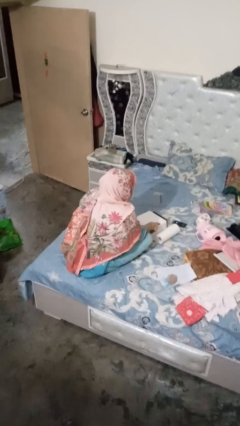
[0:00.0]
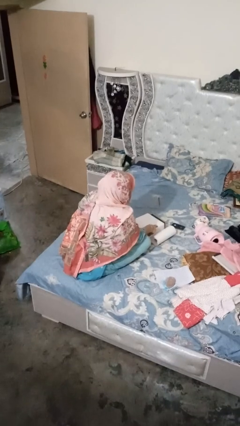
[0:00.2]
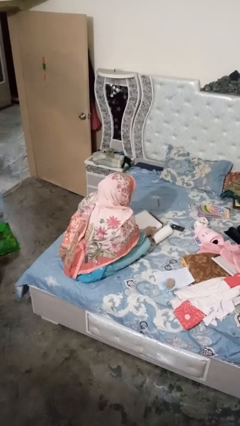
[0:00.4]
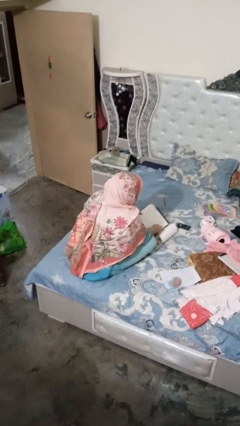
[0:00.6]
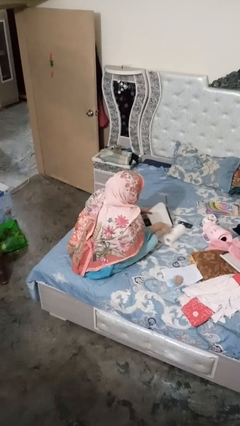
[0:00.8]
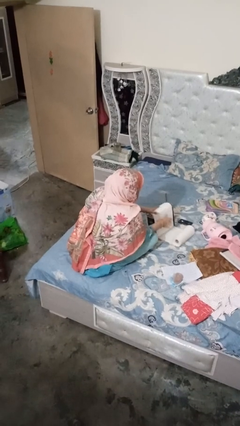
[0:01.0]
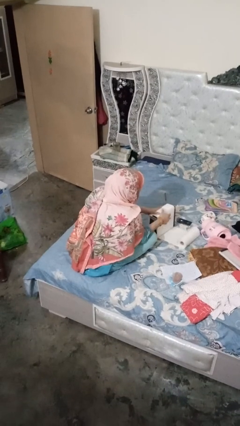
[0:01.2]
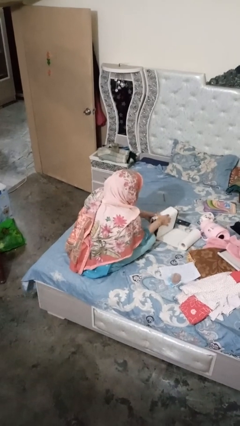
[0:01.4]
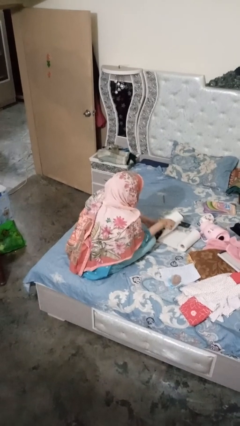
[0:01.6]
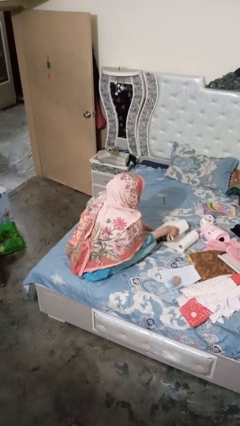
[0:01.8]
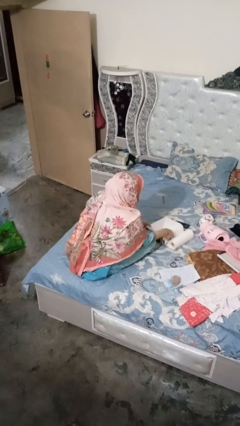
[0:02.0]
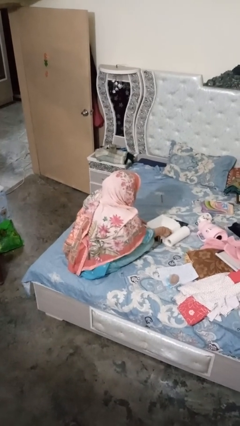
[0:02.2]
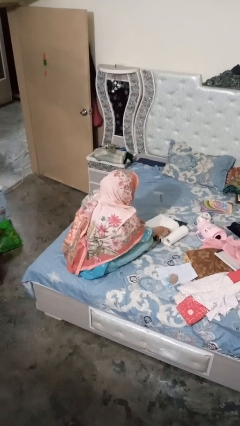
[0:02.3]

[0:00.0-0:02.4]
person wraps box

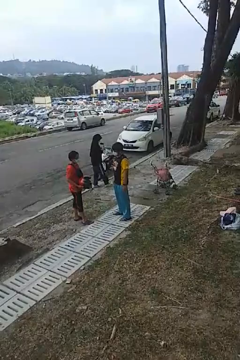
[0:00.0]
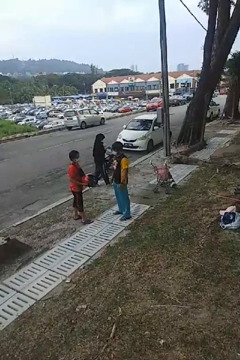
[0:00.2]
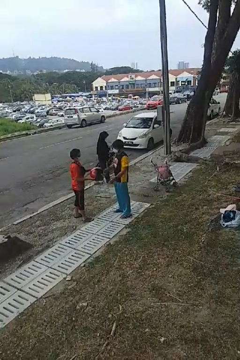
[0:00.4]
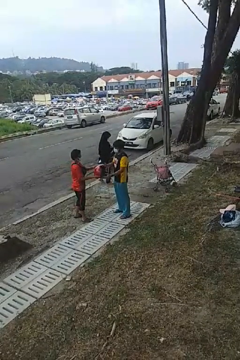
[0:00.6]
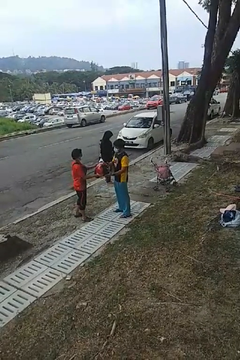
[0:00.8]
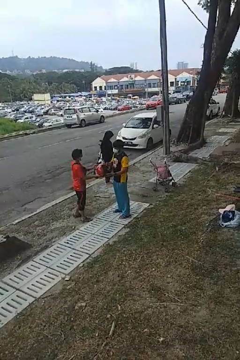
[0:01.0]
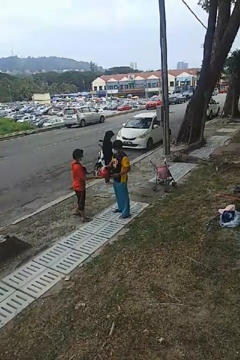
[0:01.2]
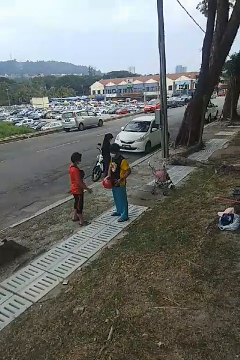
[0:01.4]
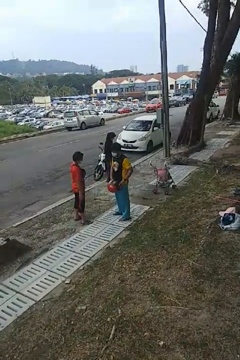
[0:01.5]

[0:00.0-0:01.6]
person transfers object to person

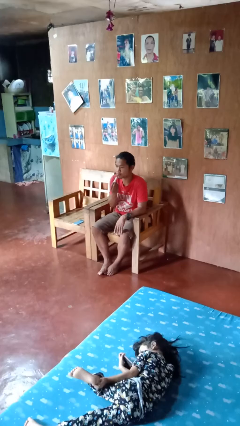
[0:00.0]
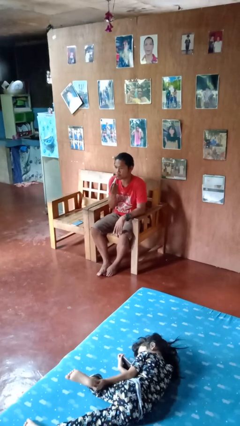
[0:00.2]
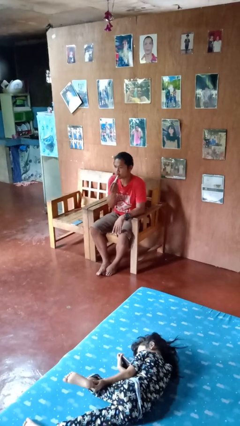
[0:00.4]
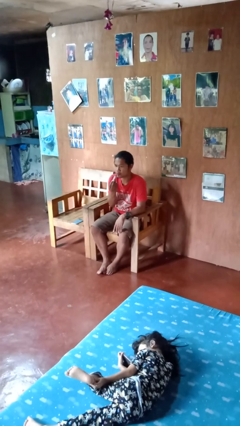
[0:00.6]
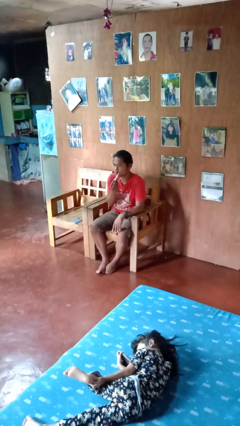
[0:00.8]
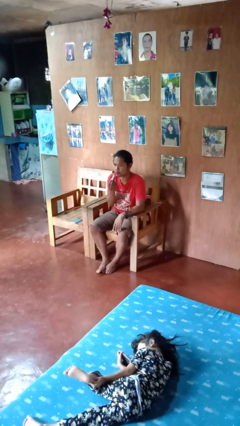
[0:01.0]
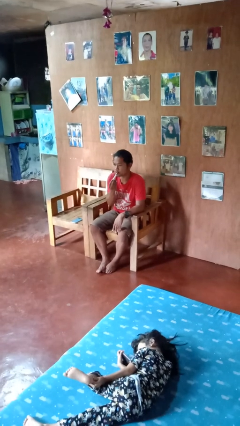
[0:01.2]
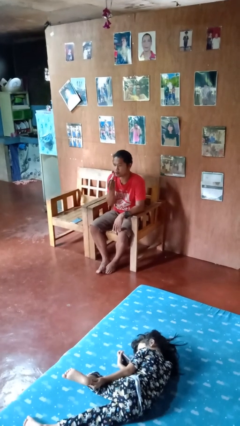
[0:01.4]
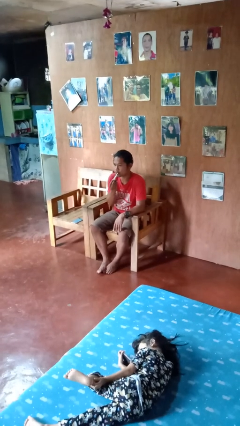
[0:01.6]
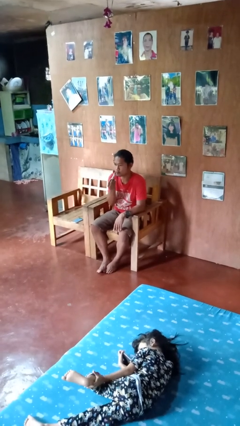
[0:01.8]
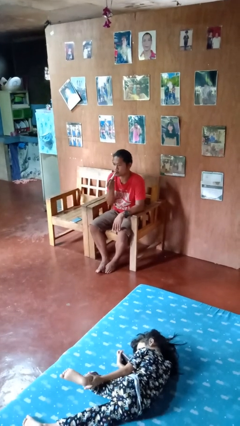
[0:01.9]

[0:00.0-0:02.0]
person applies lip makeup

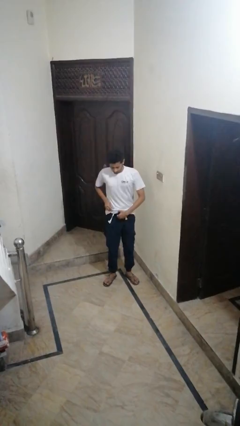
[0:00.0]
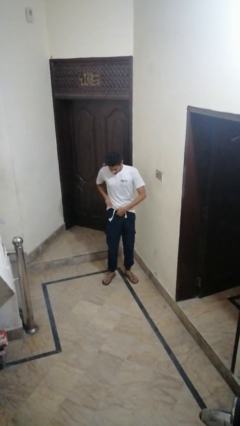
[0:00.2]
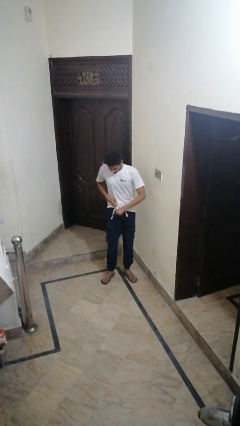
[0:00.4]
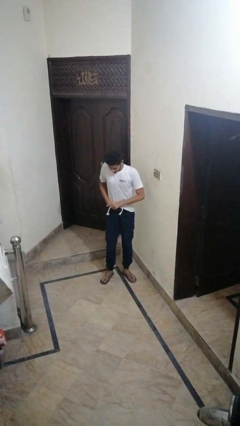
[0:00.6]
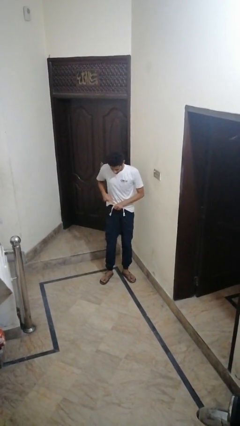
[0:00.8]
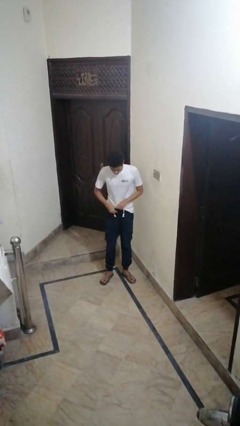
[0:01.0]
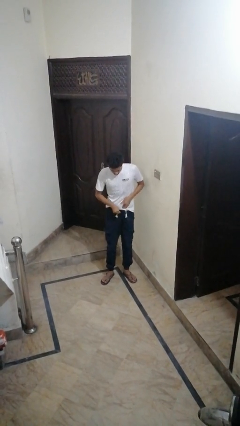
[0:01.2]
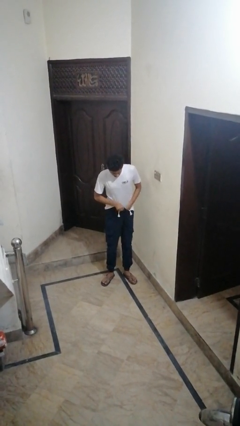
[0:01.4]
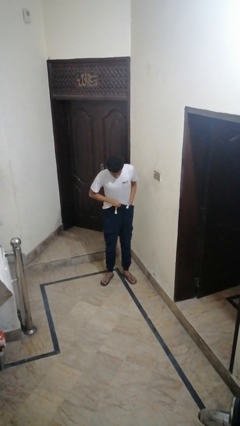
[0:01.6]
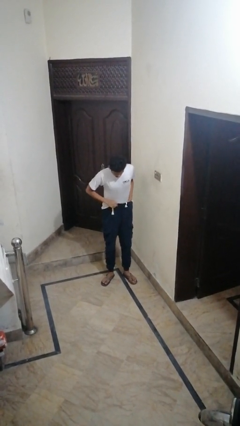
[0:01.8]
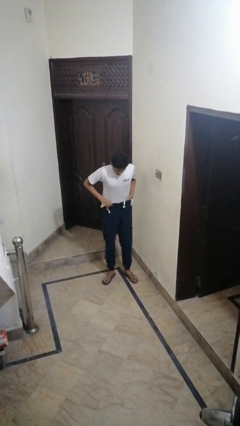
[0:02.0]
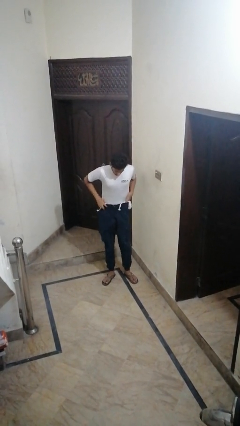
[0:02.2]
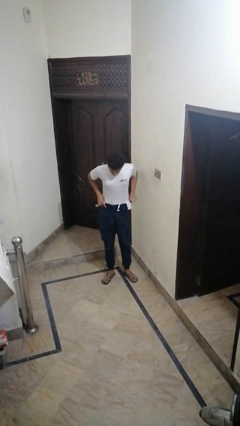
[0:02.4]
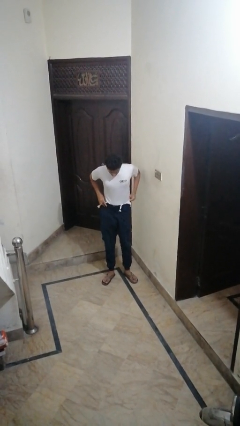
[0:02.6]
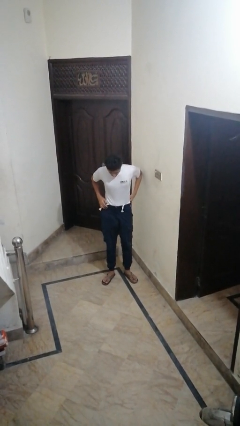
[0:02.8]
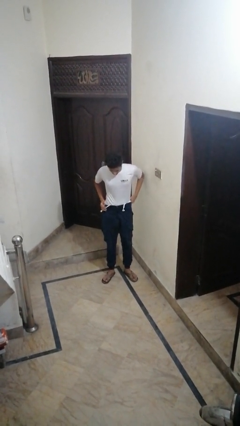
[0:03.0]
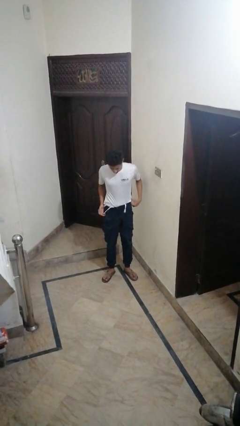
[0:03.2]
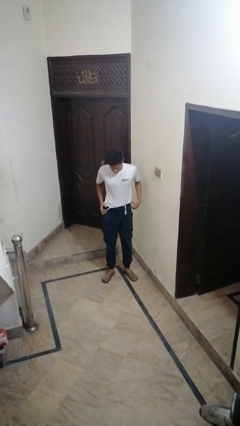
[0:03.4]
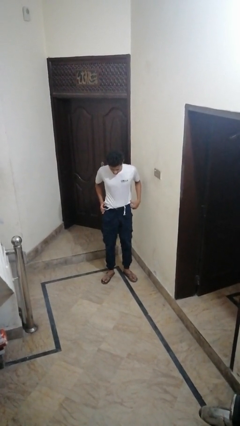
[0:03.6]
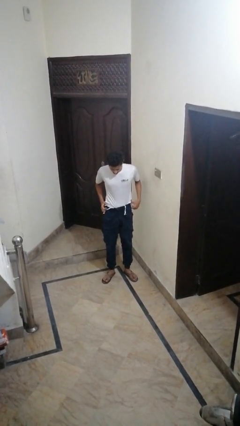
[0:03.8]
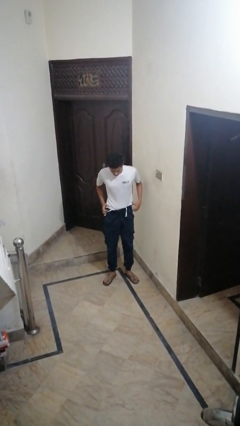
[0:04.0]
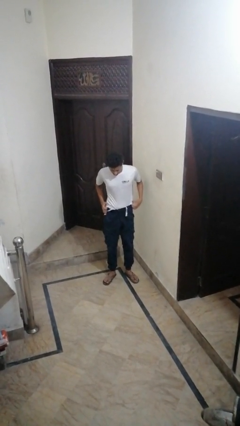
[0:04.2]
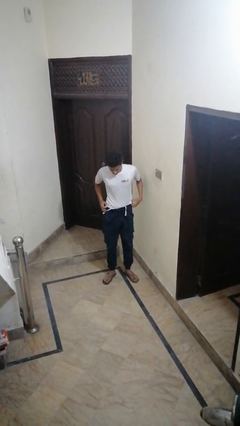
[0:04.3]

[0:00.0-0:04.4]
person tucks in shirt

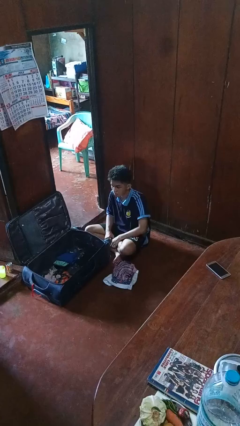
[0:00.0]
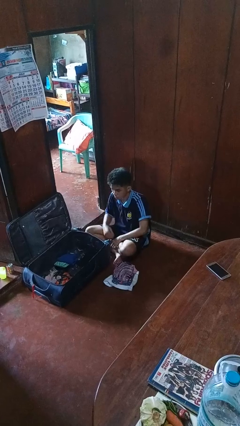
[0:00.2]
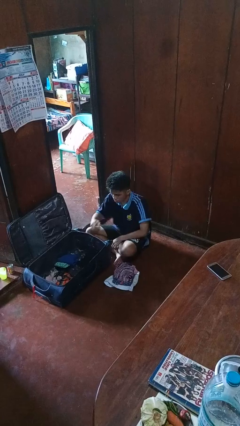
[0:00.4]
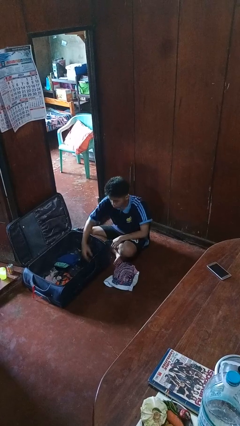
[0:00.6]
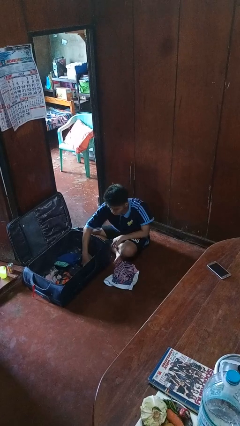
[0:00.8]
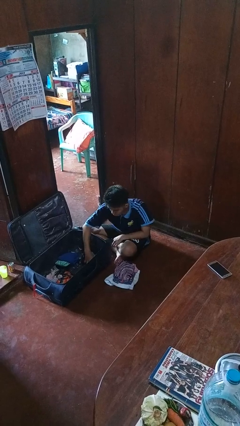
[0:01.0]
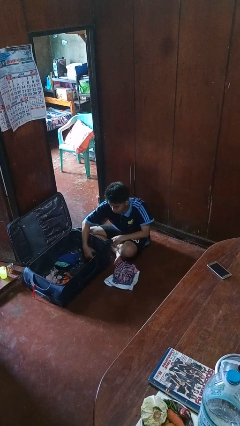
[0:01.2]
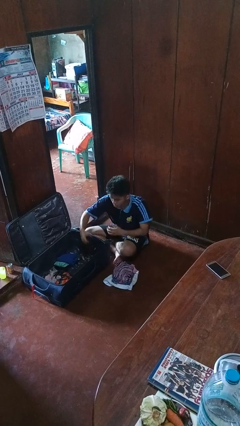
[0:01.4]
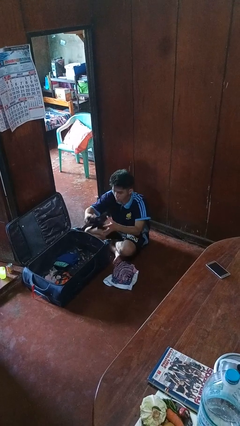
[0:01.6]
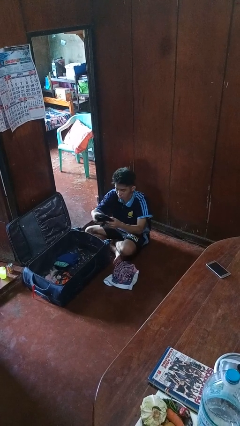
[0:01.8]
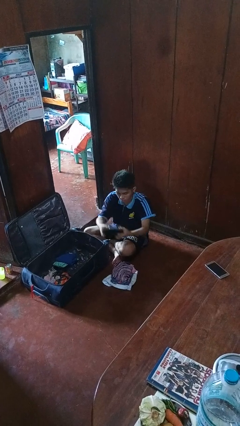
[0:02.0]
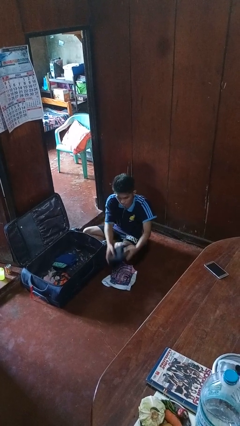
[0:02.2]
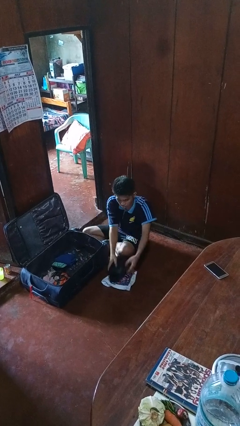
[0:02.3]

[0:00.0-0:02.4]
person unloads clothes from suitcase

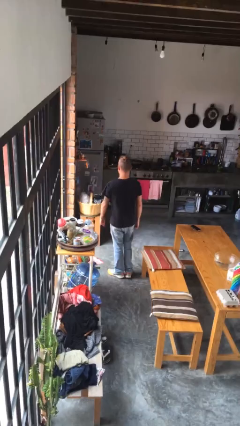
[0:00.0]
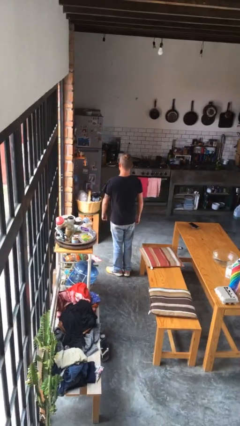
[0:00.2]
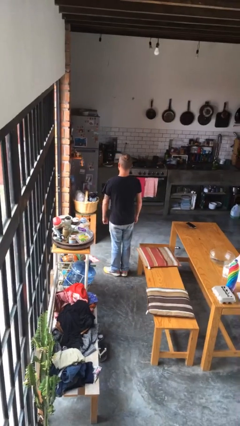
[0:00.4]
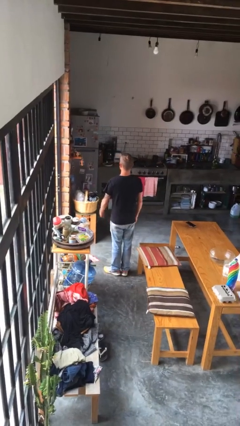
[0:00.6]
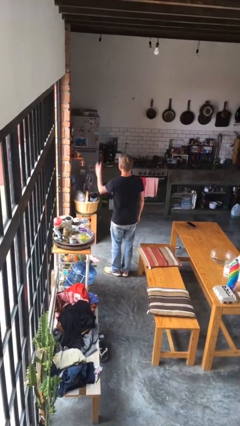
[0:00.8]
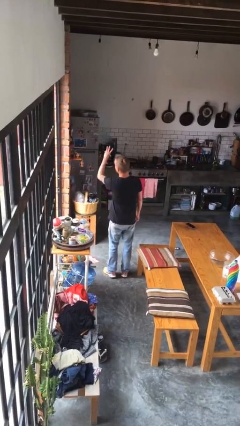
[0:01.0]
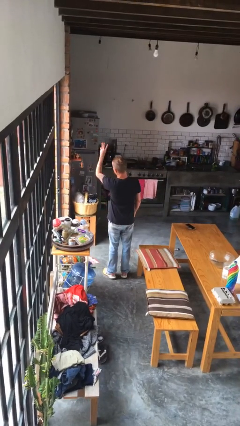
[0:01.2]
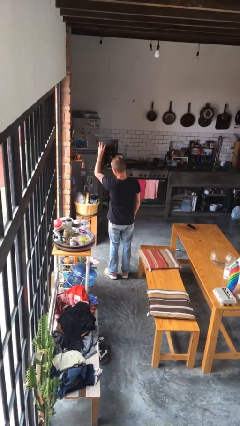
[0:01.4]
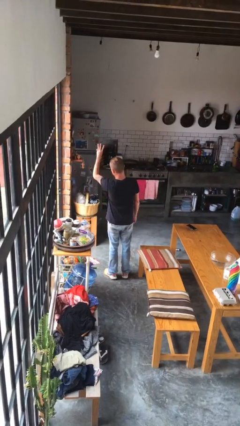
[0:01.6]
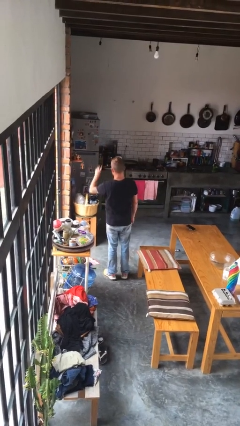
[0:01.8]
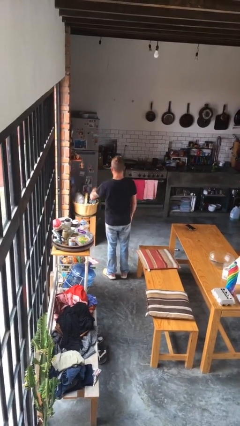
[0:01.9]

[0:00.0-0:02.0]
person gestures number three

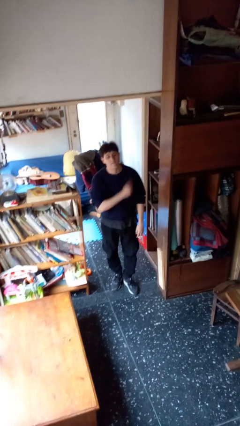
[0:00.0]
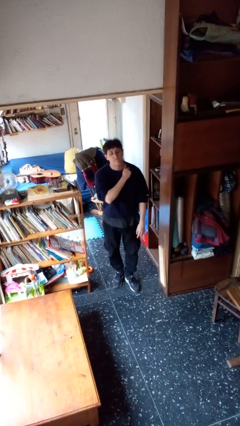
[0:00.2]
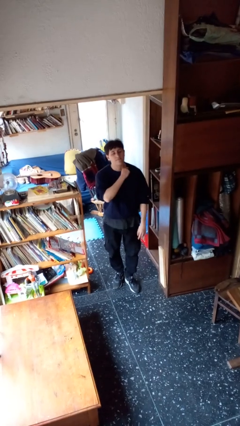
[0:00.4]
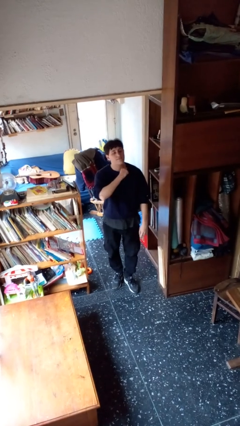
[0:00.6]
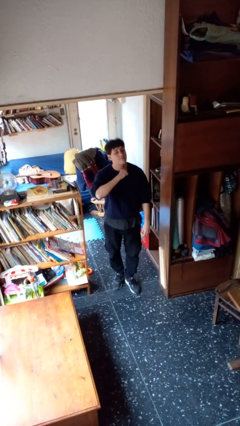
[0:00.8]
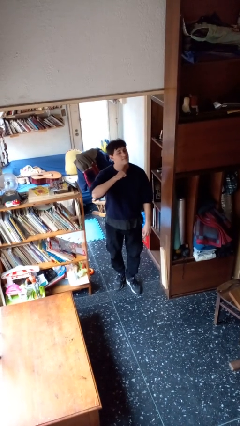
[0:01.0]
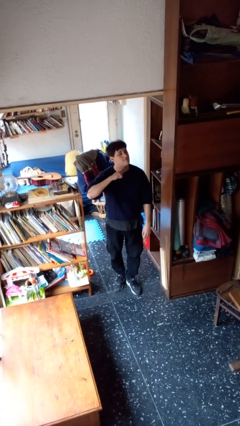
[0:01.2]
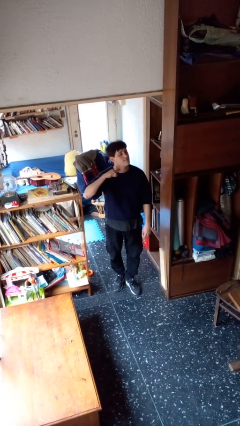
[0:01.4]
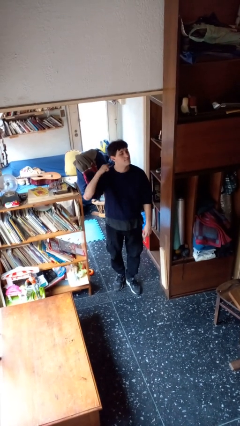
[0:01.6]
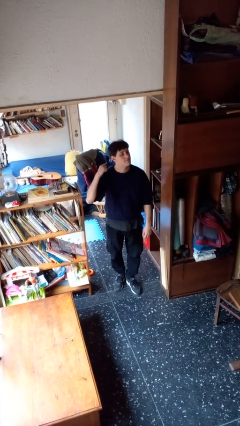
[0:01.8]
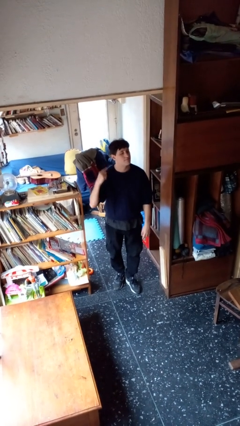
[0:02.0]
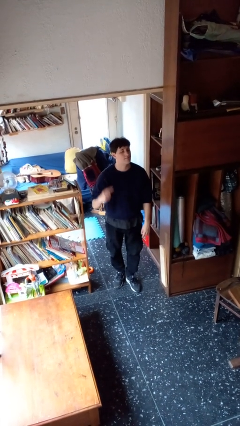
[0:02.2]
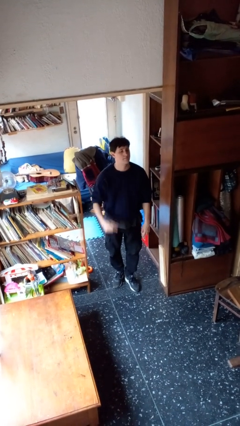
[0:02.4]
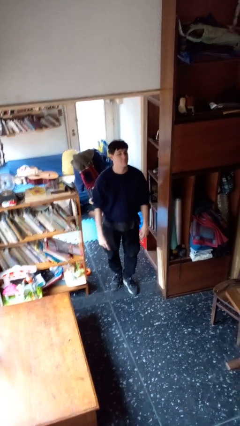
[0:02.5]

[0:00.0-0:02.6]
person gestures cut

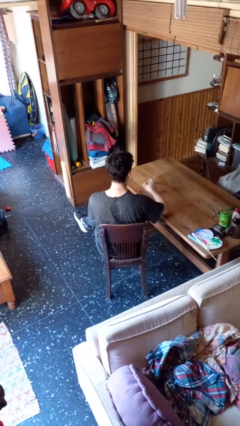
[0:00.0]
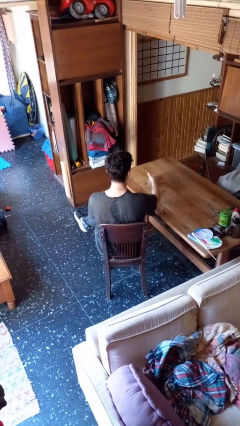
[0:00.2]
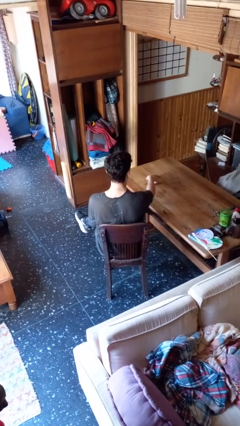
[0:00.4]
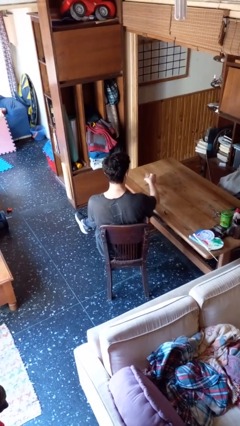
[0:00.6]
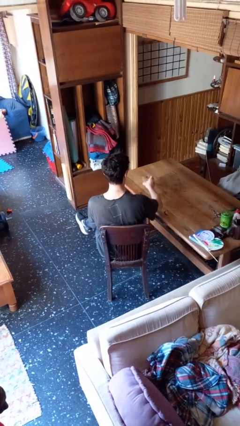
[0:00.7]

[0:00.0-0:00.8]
person sets upright glass
